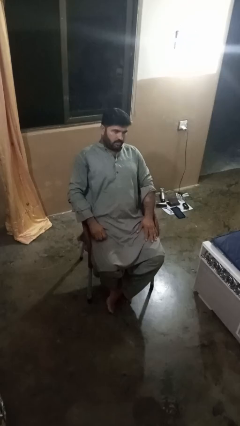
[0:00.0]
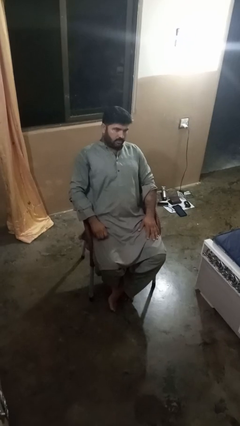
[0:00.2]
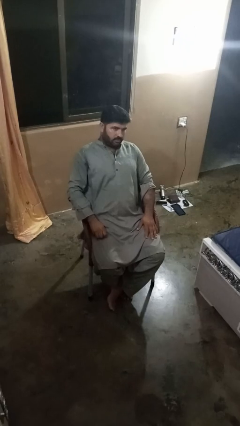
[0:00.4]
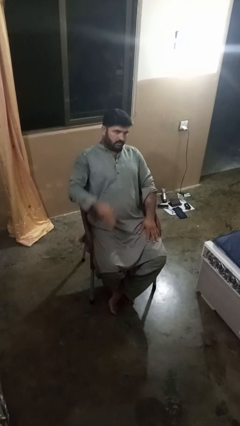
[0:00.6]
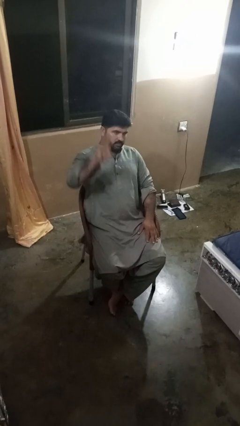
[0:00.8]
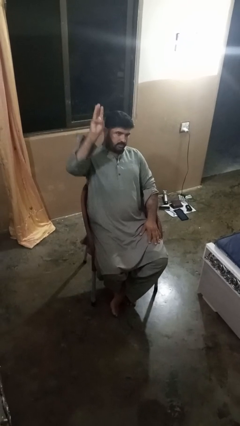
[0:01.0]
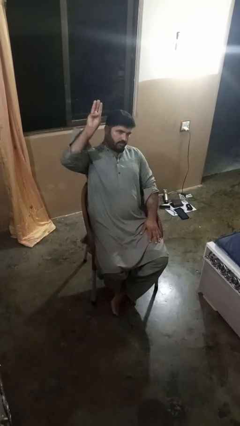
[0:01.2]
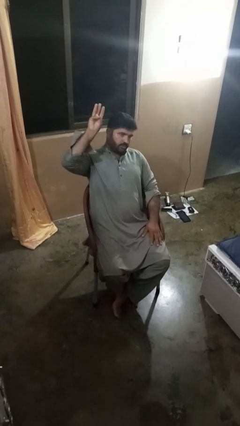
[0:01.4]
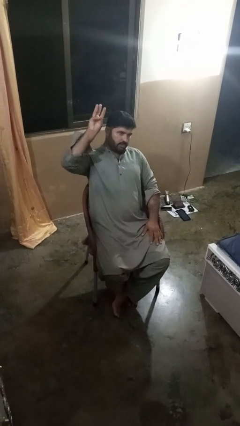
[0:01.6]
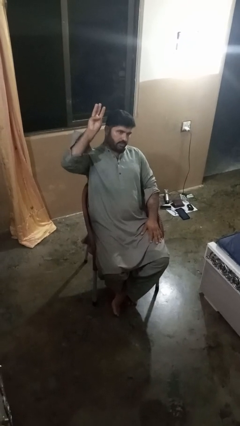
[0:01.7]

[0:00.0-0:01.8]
person gestures number three

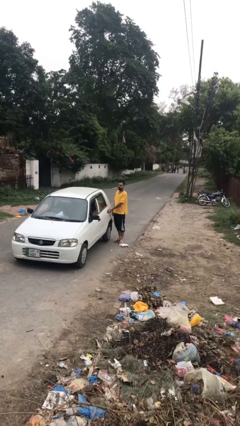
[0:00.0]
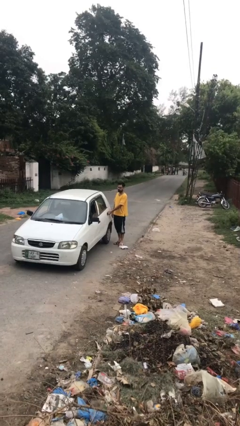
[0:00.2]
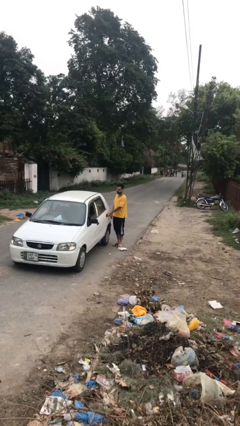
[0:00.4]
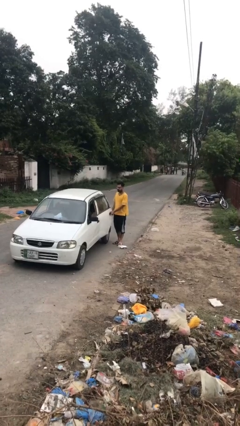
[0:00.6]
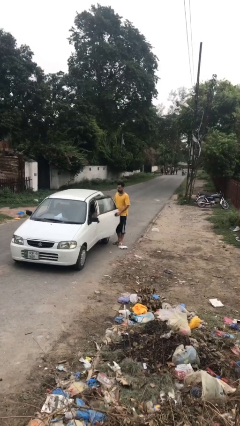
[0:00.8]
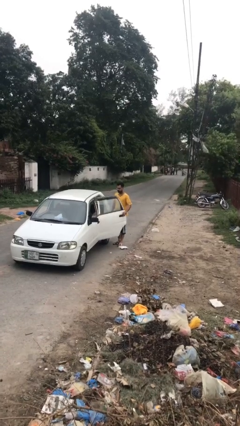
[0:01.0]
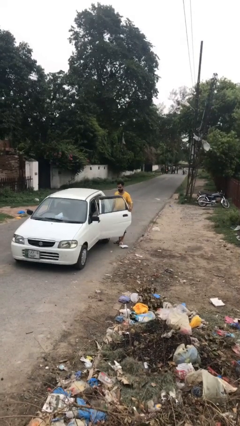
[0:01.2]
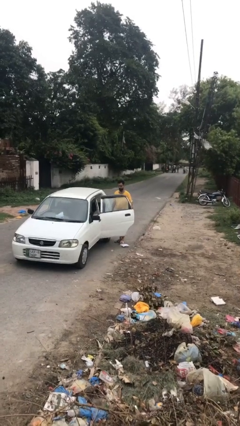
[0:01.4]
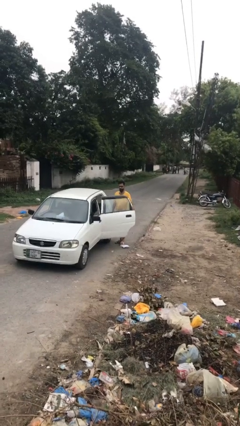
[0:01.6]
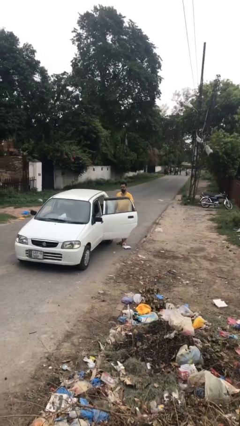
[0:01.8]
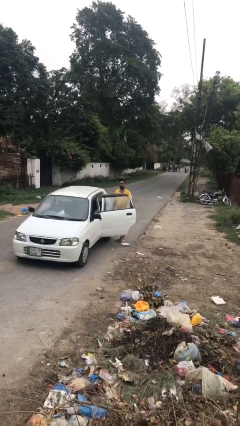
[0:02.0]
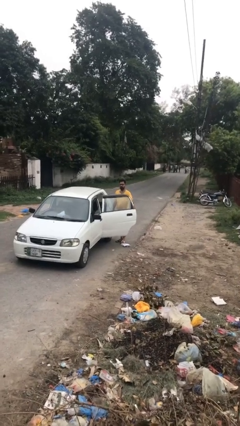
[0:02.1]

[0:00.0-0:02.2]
person opens car door

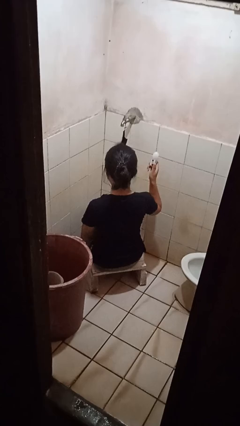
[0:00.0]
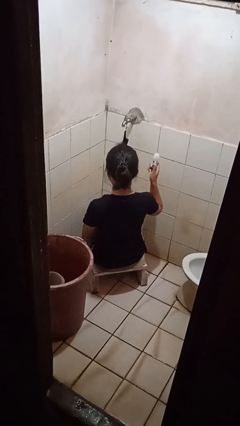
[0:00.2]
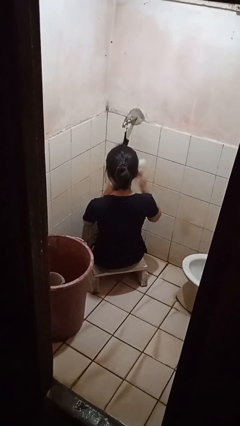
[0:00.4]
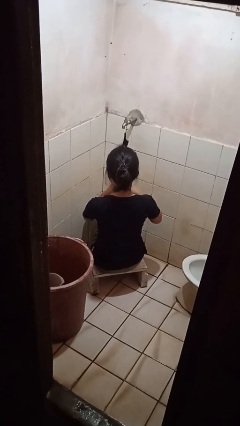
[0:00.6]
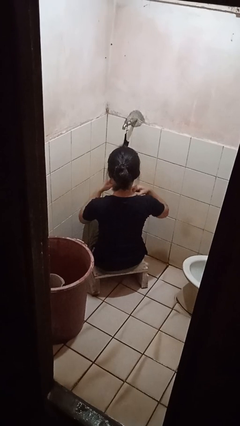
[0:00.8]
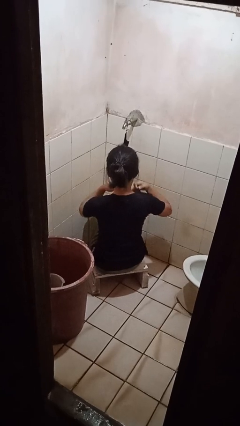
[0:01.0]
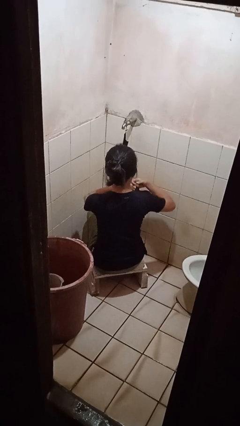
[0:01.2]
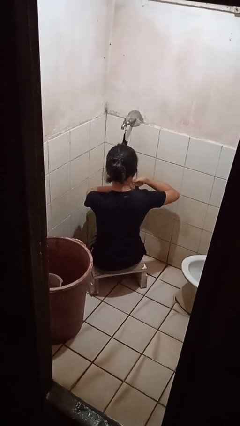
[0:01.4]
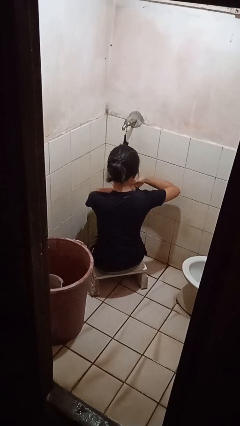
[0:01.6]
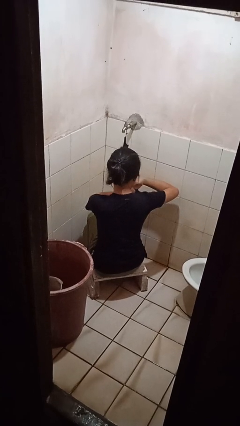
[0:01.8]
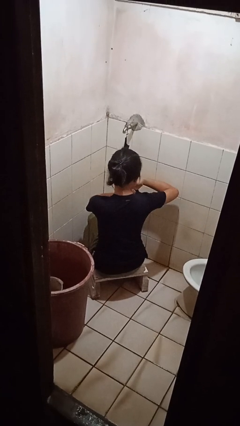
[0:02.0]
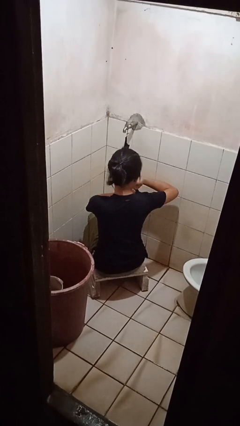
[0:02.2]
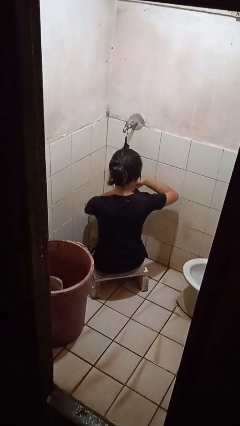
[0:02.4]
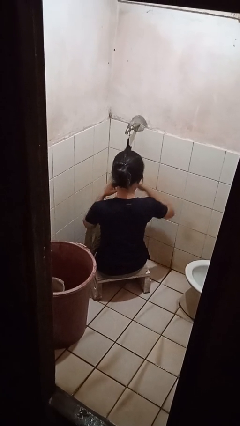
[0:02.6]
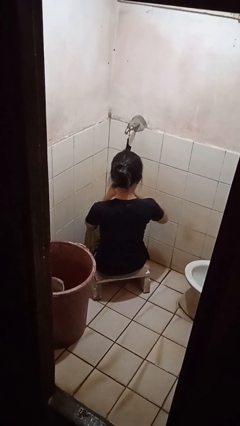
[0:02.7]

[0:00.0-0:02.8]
person applies deodorant

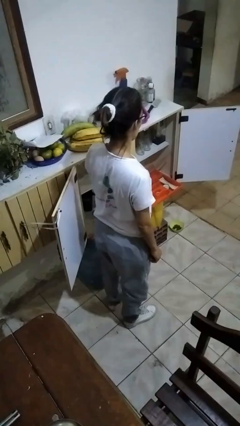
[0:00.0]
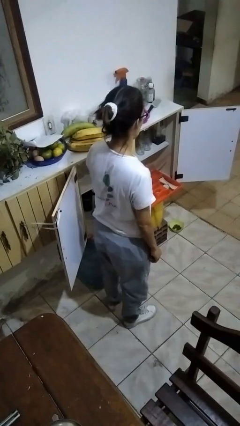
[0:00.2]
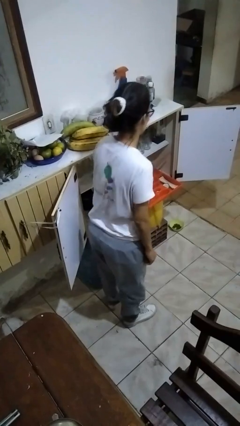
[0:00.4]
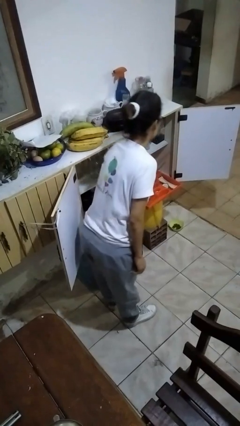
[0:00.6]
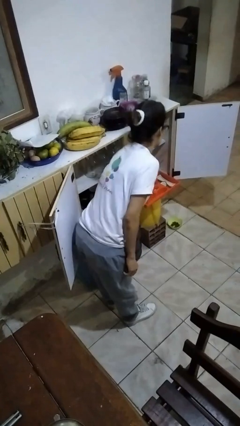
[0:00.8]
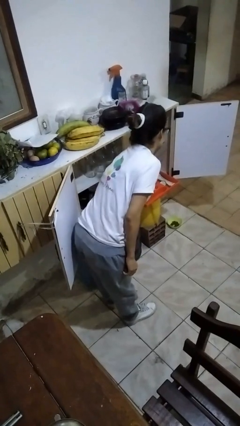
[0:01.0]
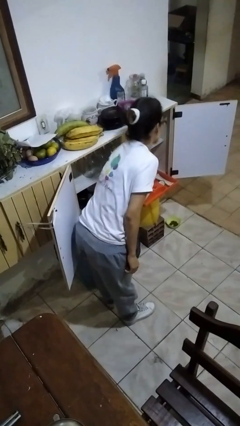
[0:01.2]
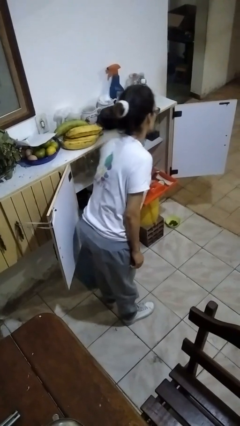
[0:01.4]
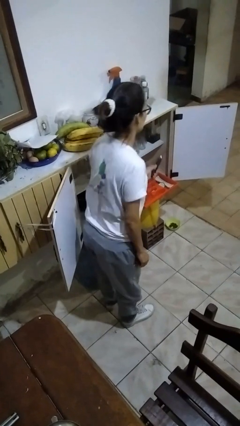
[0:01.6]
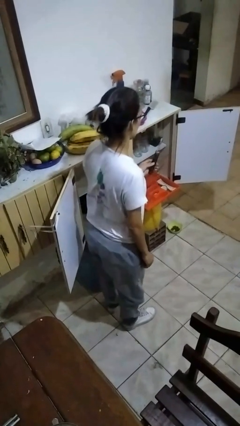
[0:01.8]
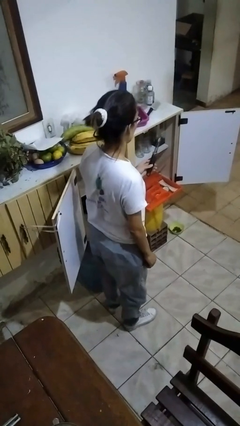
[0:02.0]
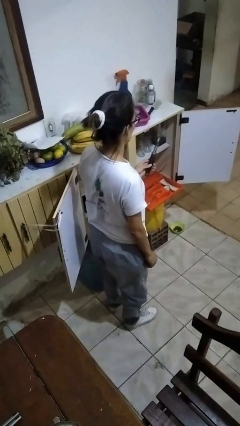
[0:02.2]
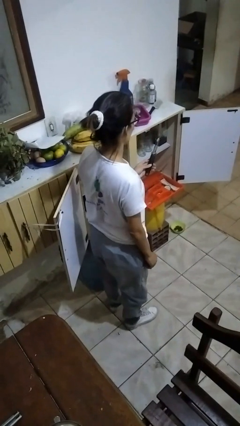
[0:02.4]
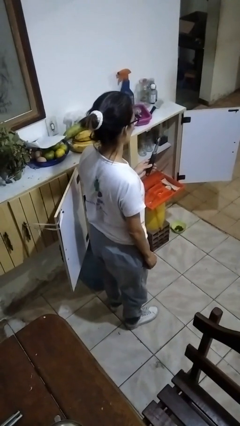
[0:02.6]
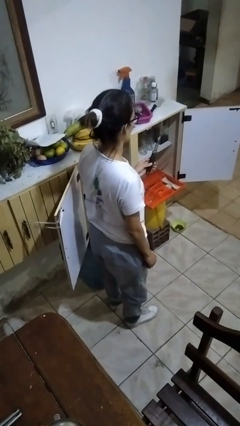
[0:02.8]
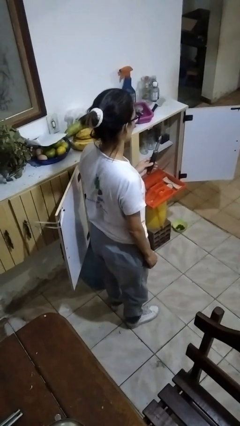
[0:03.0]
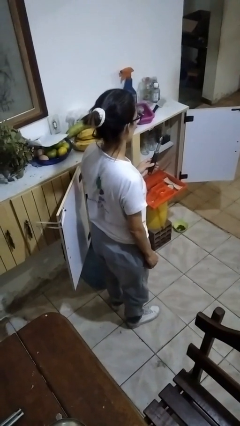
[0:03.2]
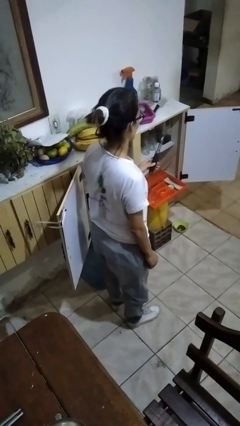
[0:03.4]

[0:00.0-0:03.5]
person takes object from kitchen drawer

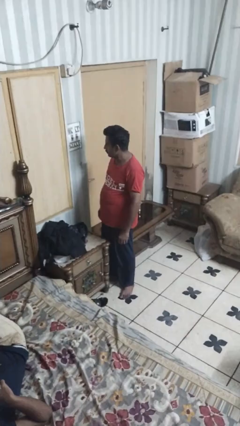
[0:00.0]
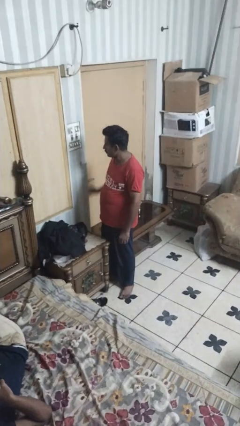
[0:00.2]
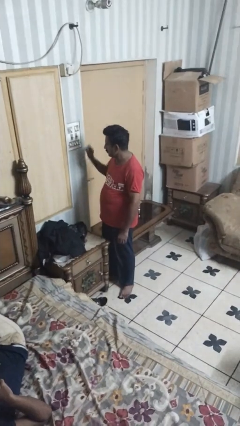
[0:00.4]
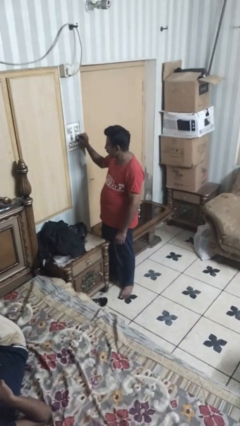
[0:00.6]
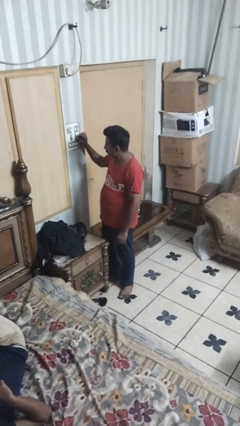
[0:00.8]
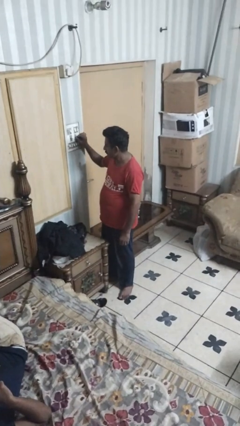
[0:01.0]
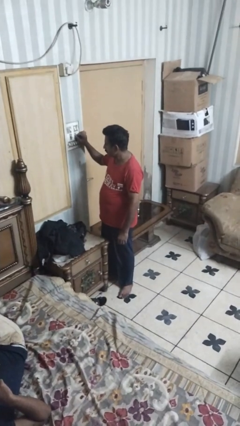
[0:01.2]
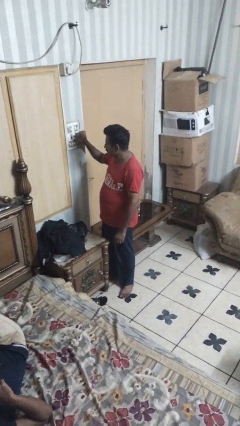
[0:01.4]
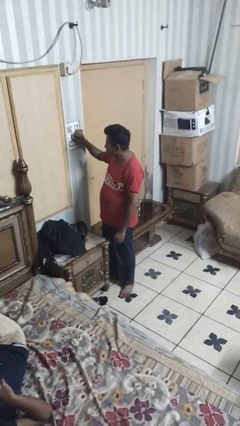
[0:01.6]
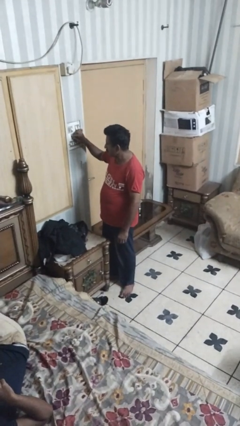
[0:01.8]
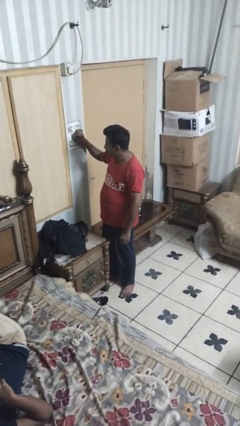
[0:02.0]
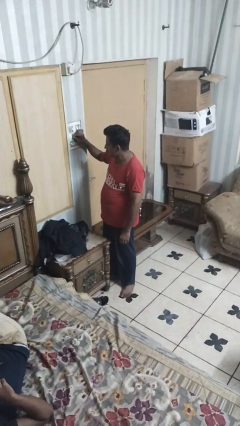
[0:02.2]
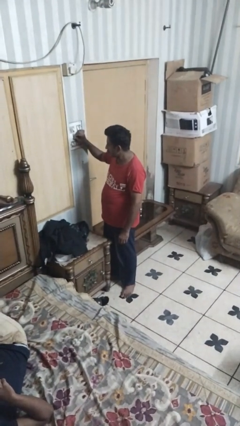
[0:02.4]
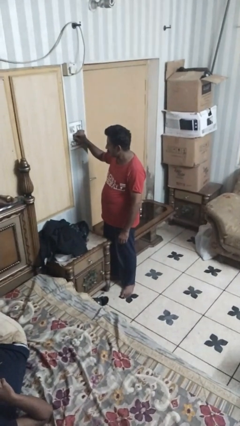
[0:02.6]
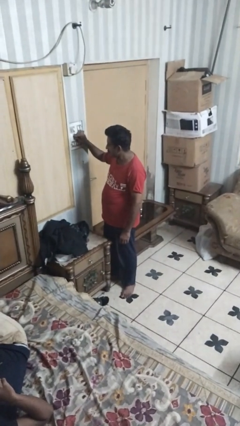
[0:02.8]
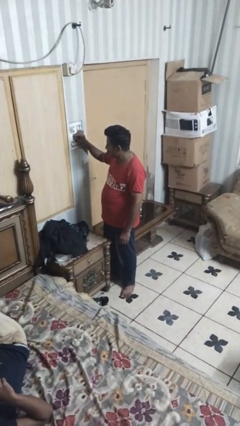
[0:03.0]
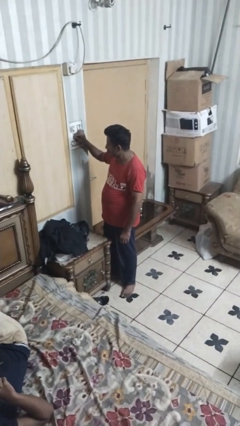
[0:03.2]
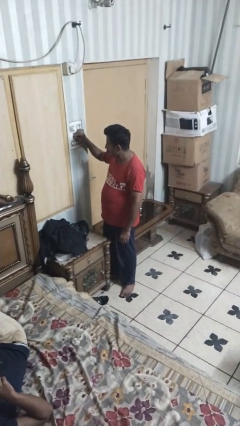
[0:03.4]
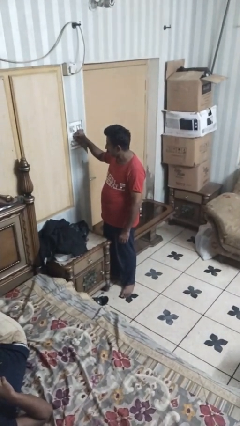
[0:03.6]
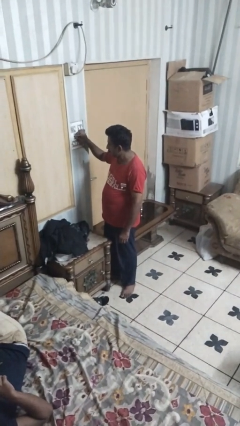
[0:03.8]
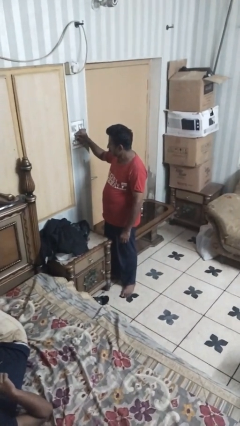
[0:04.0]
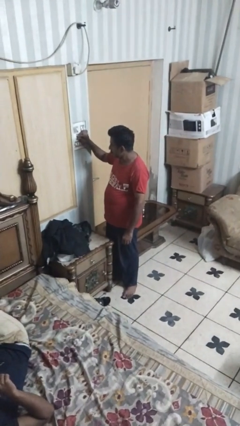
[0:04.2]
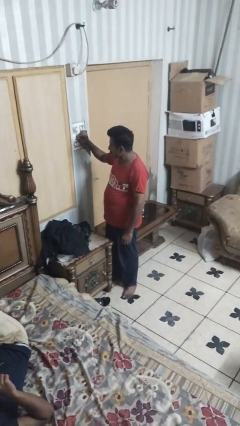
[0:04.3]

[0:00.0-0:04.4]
person adjusts thermostat

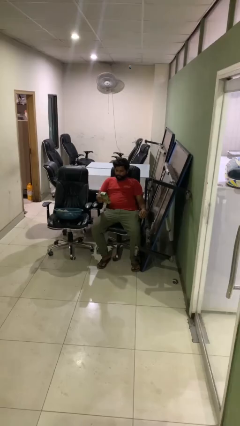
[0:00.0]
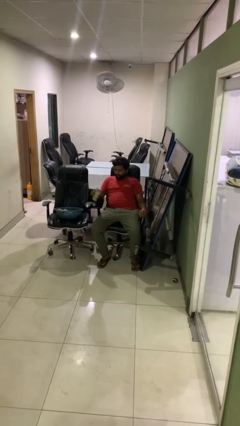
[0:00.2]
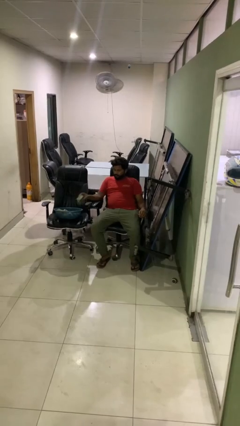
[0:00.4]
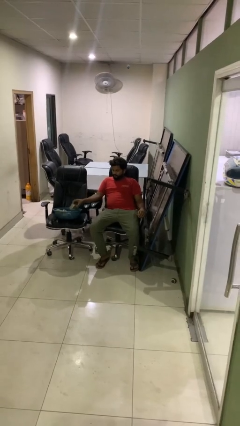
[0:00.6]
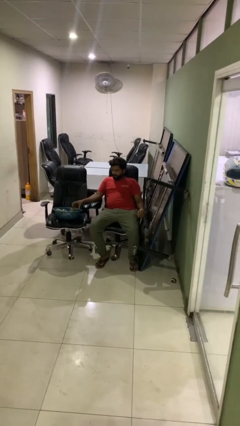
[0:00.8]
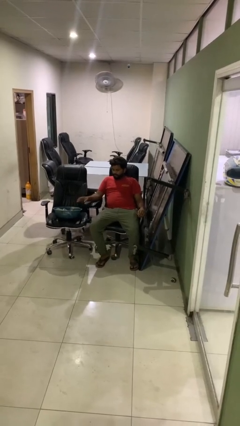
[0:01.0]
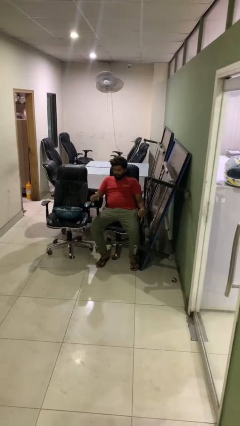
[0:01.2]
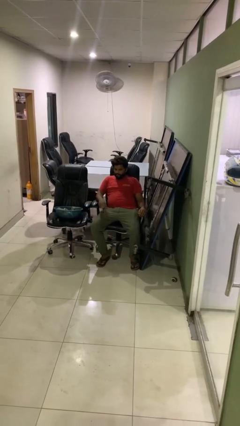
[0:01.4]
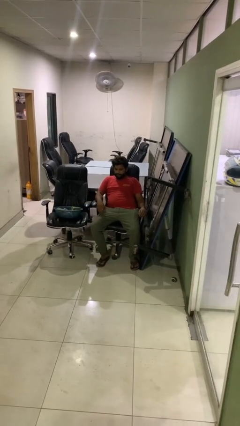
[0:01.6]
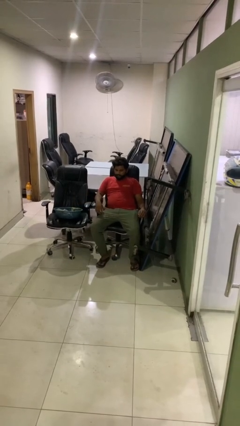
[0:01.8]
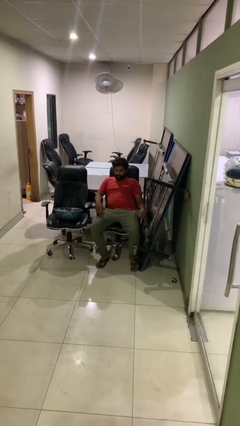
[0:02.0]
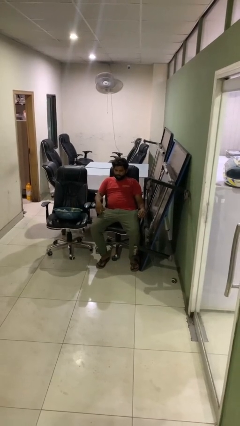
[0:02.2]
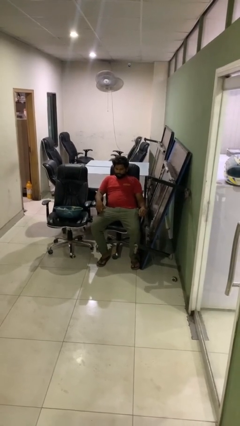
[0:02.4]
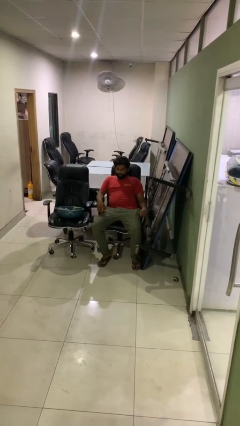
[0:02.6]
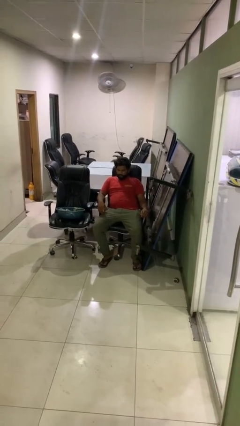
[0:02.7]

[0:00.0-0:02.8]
person puts object into basket
